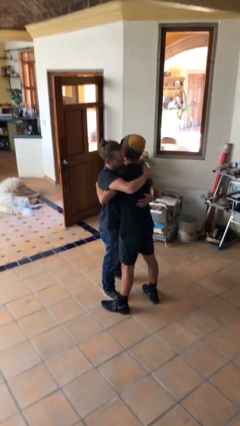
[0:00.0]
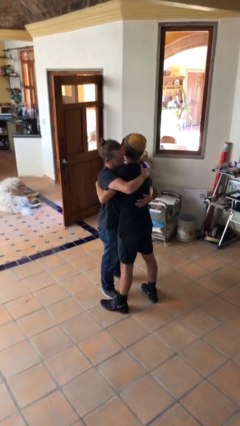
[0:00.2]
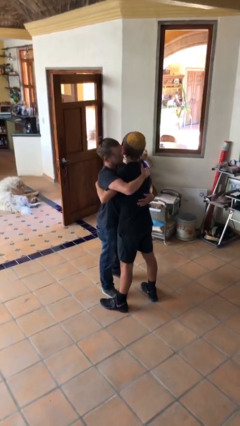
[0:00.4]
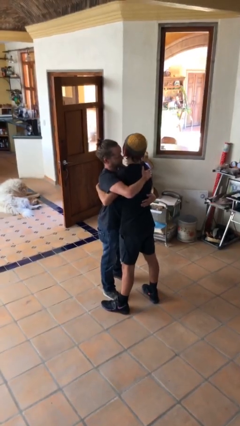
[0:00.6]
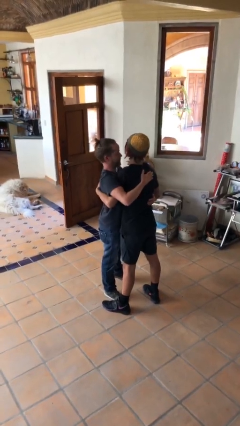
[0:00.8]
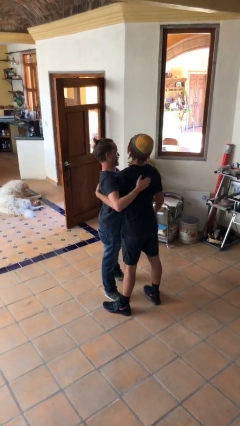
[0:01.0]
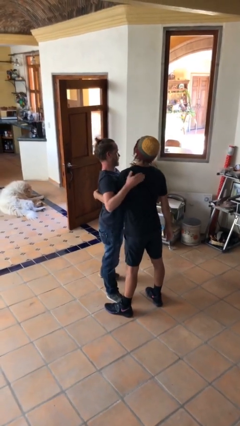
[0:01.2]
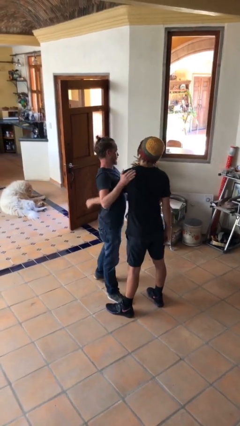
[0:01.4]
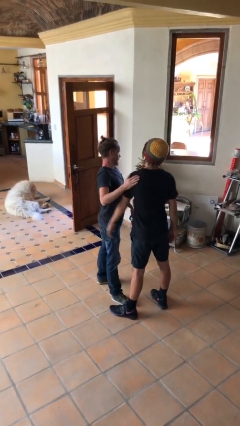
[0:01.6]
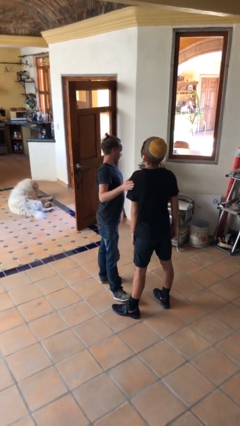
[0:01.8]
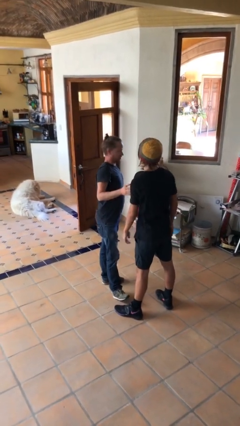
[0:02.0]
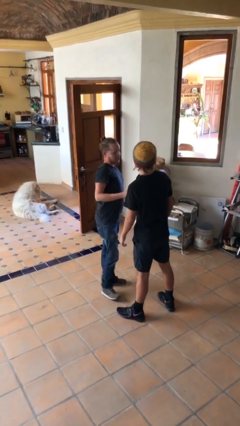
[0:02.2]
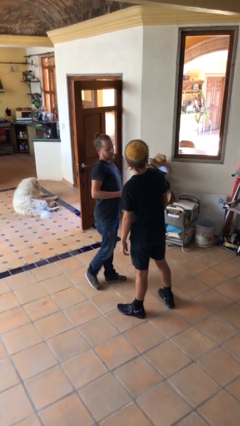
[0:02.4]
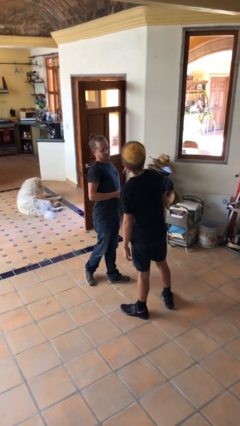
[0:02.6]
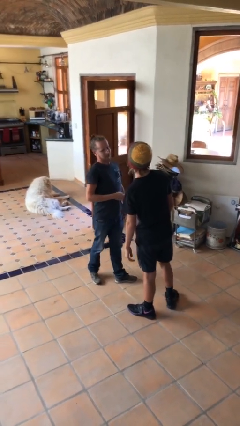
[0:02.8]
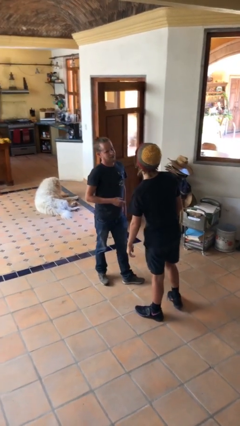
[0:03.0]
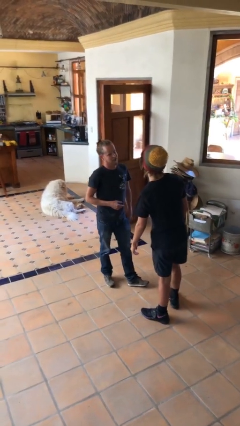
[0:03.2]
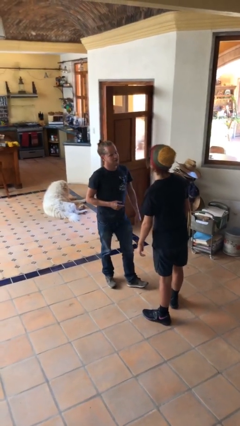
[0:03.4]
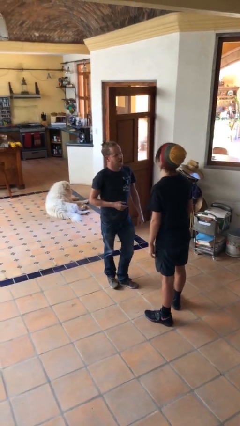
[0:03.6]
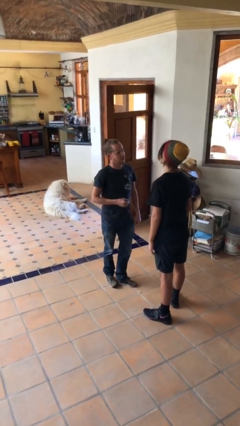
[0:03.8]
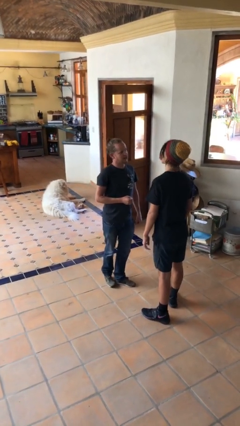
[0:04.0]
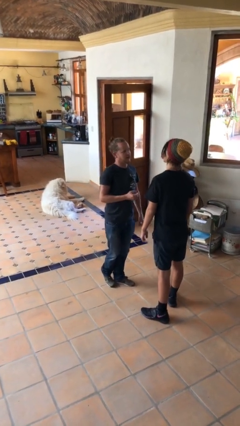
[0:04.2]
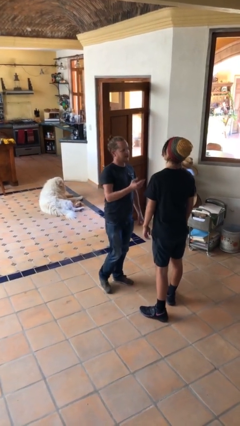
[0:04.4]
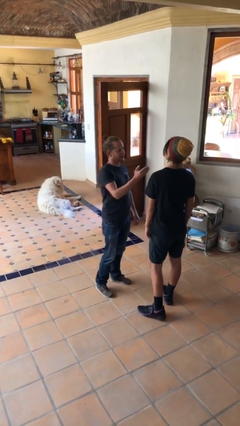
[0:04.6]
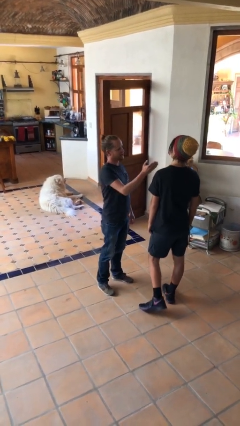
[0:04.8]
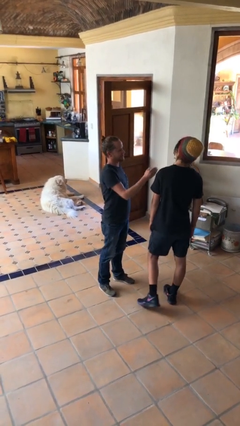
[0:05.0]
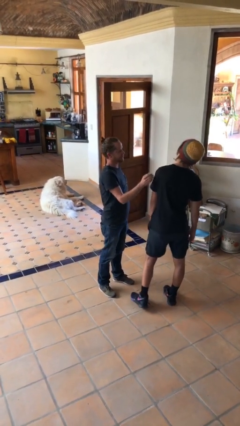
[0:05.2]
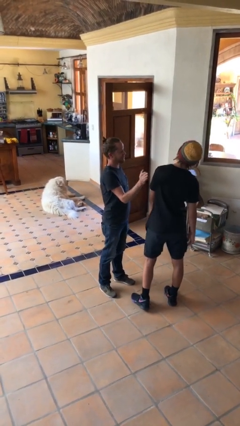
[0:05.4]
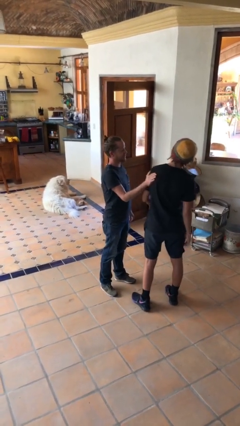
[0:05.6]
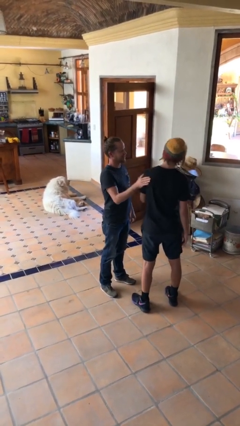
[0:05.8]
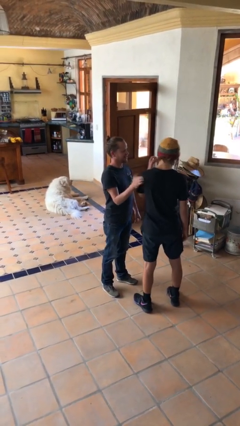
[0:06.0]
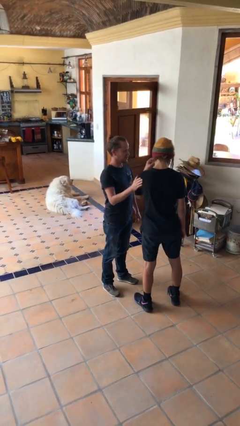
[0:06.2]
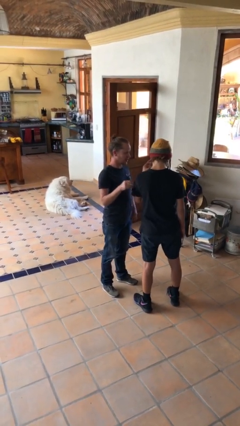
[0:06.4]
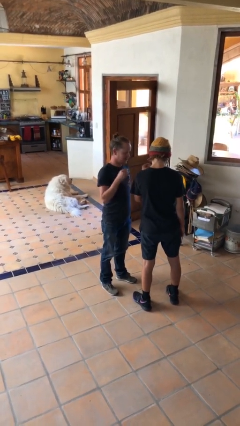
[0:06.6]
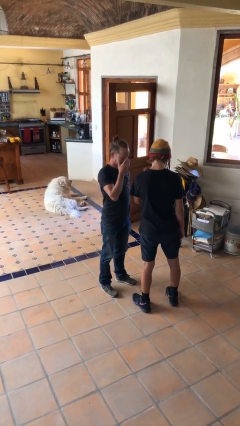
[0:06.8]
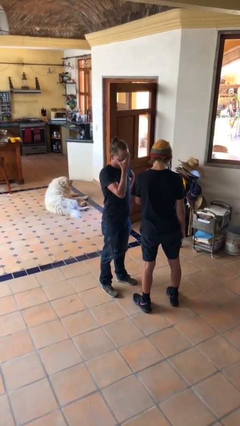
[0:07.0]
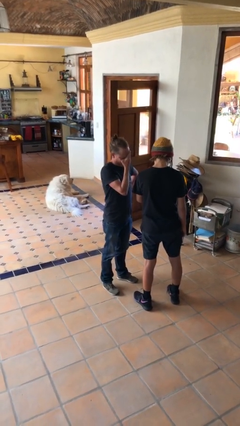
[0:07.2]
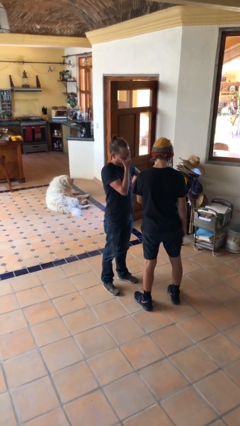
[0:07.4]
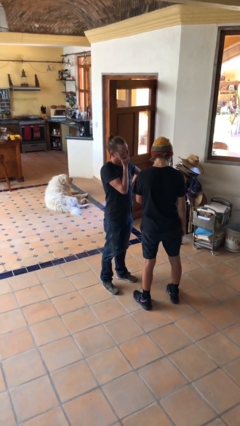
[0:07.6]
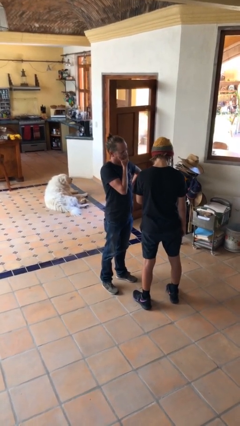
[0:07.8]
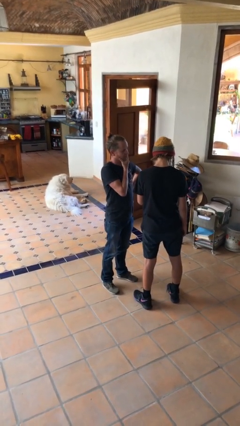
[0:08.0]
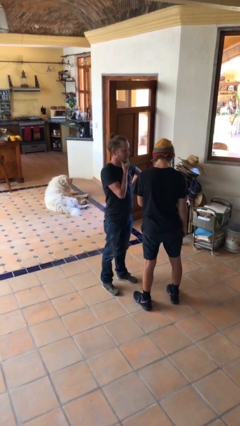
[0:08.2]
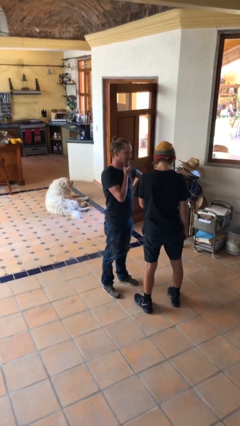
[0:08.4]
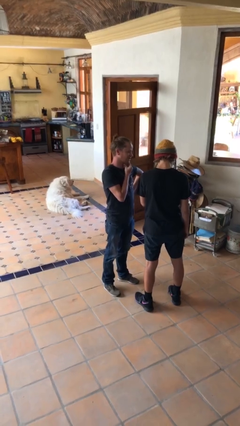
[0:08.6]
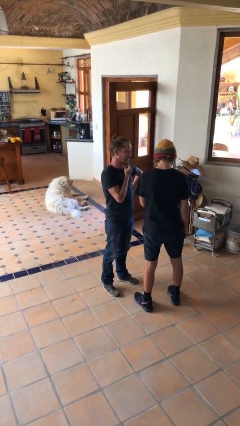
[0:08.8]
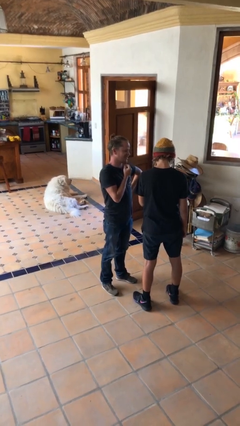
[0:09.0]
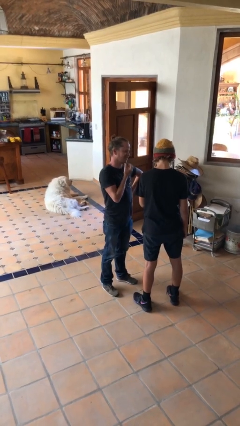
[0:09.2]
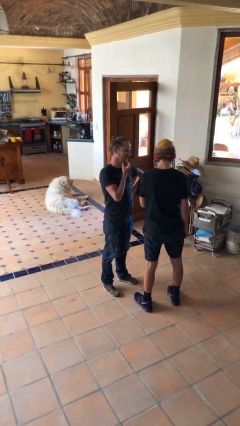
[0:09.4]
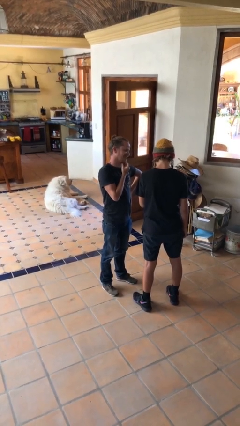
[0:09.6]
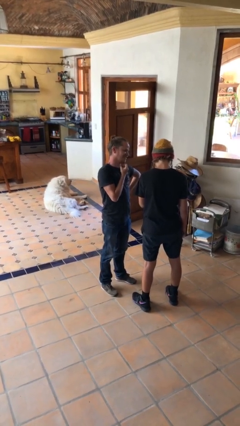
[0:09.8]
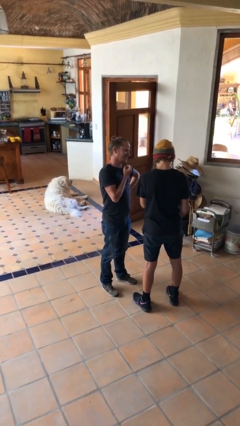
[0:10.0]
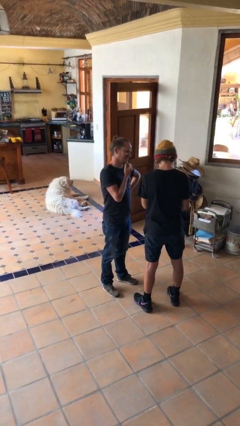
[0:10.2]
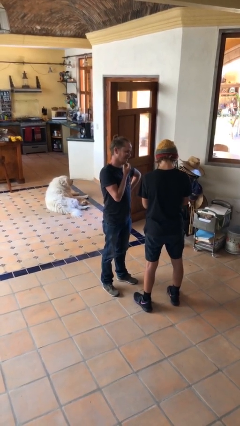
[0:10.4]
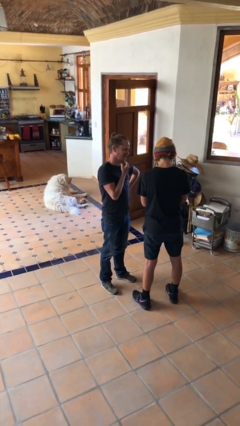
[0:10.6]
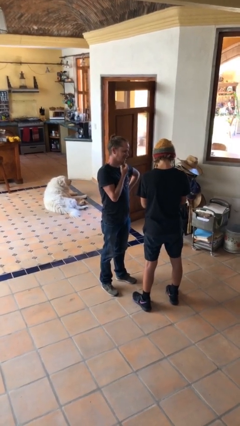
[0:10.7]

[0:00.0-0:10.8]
person talks to person

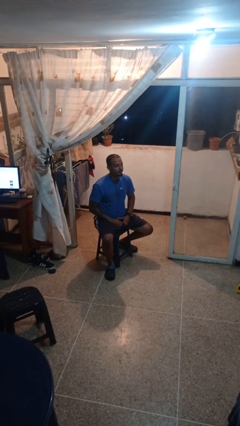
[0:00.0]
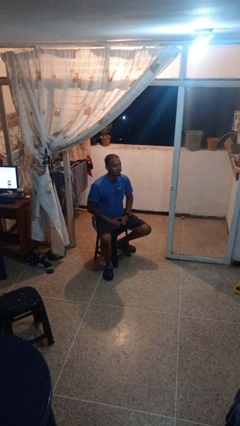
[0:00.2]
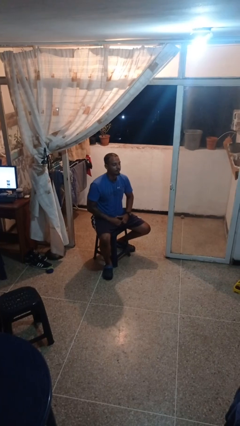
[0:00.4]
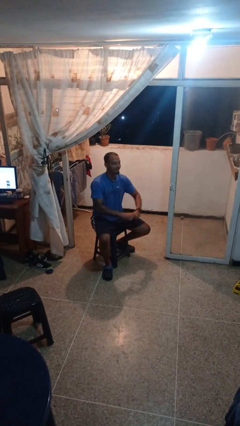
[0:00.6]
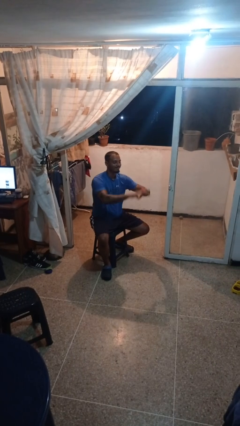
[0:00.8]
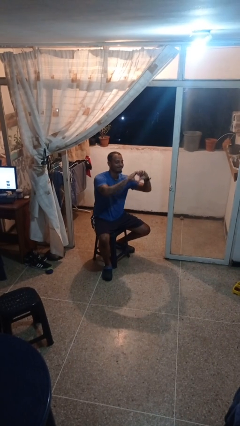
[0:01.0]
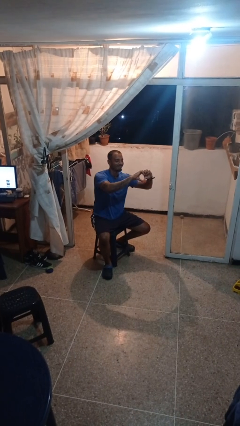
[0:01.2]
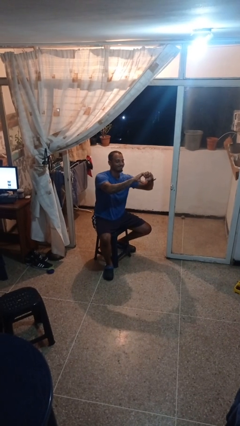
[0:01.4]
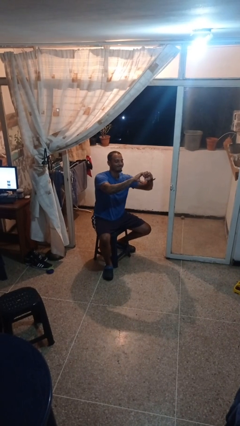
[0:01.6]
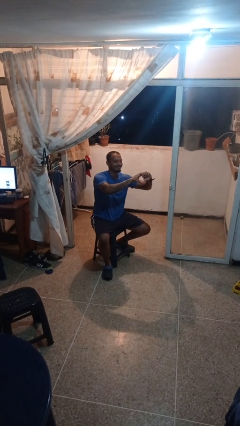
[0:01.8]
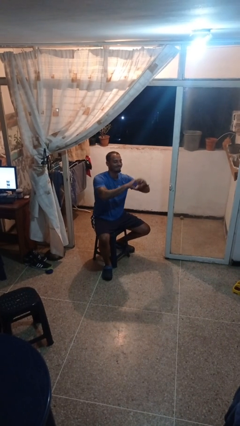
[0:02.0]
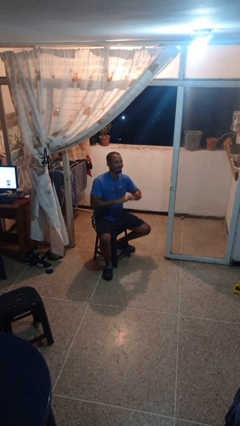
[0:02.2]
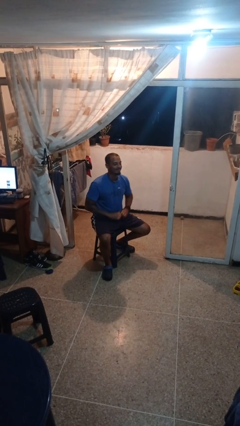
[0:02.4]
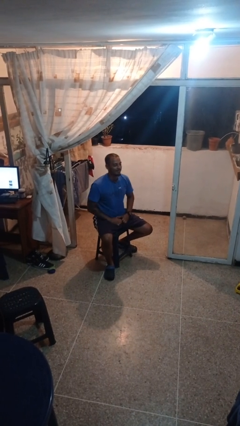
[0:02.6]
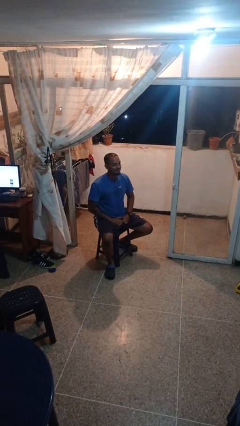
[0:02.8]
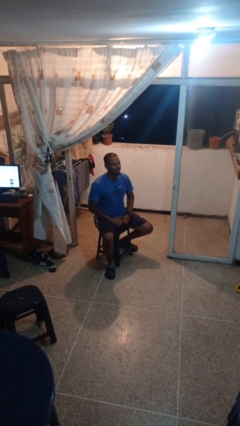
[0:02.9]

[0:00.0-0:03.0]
person gestures heart

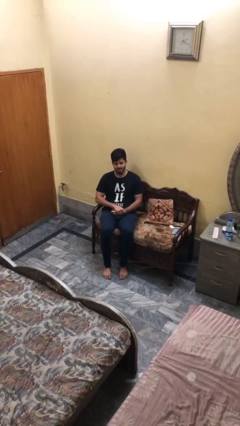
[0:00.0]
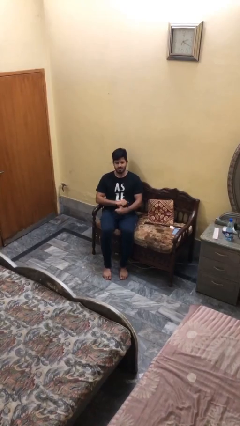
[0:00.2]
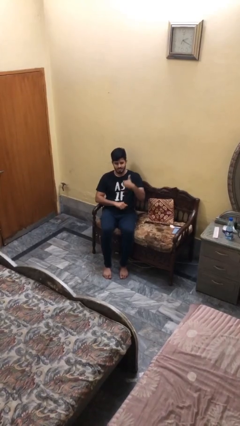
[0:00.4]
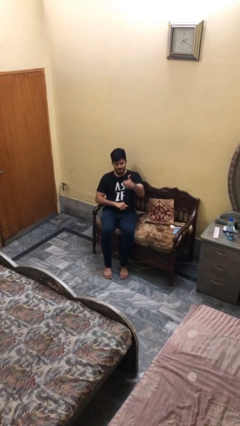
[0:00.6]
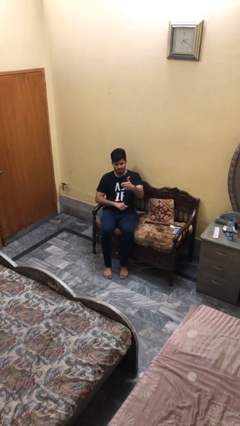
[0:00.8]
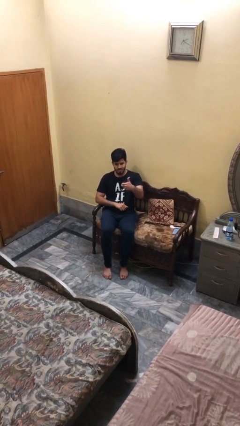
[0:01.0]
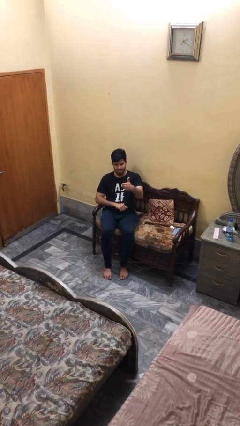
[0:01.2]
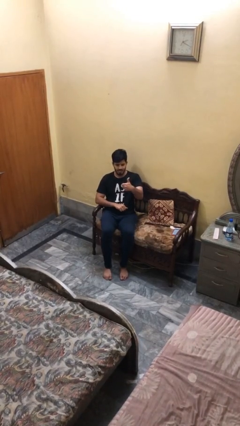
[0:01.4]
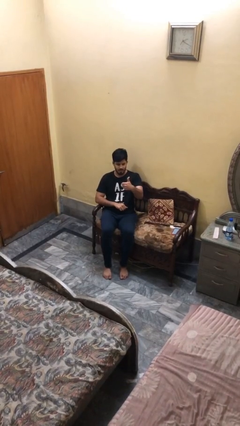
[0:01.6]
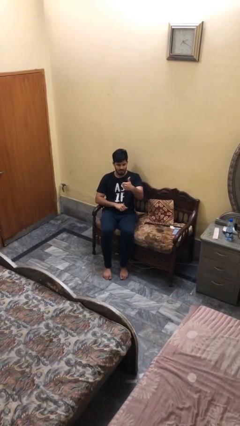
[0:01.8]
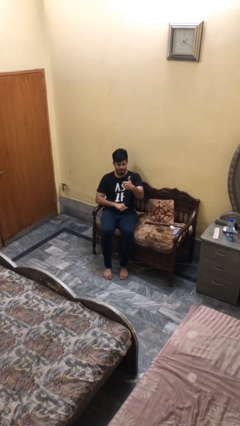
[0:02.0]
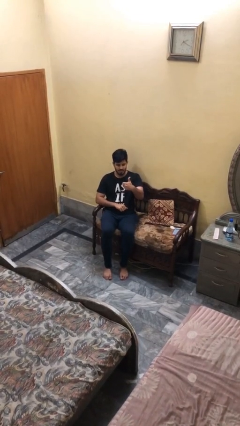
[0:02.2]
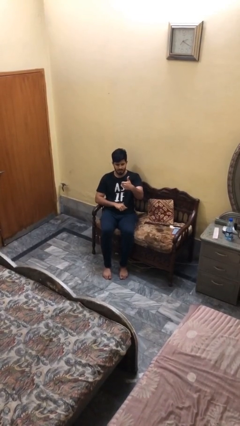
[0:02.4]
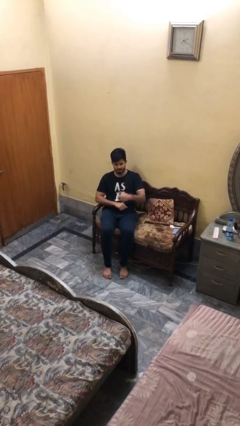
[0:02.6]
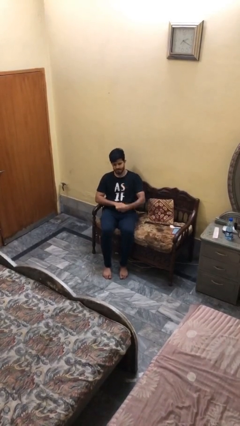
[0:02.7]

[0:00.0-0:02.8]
person gestures thumbs up

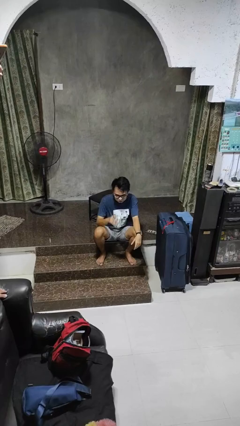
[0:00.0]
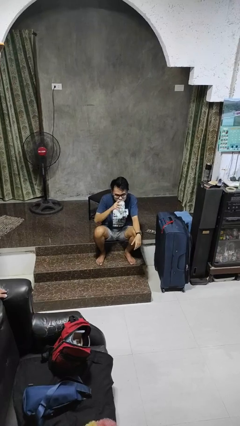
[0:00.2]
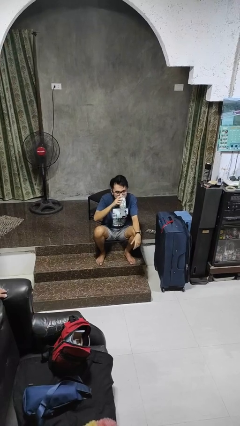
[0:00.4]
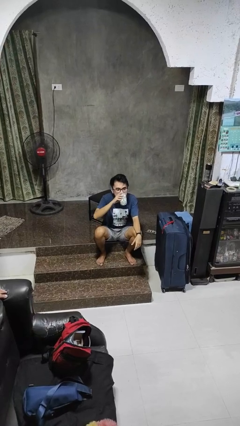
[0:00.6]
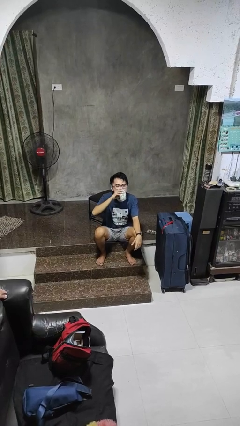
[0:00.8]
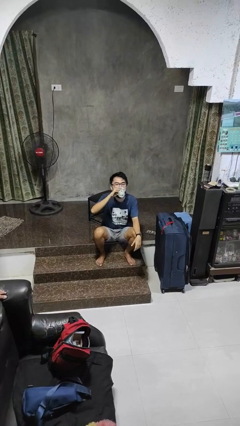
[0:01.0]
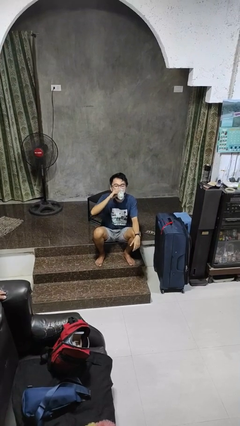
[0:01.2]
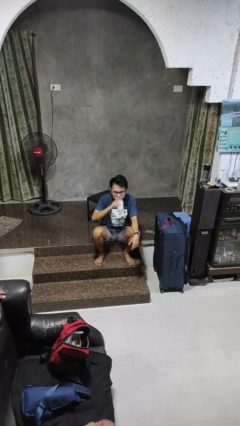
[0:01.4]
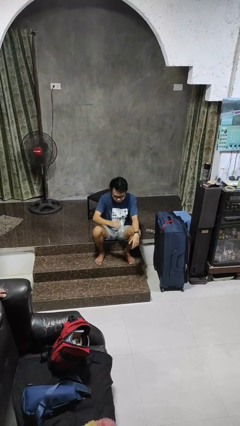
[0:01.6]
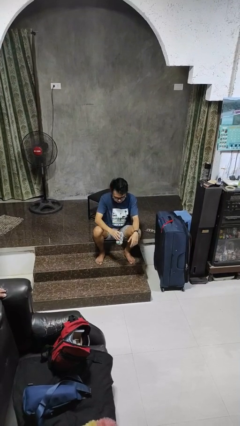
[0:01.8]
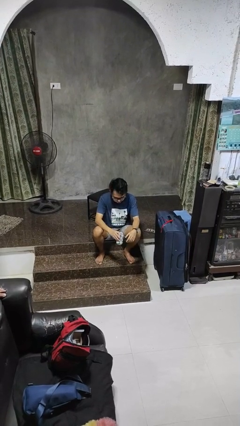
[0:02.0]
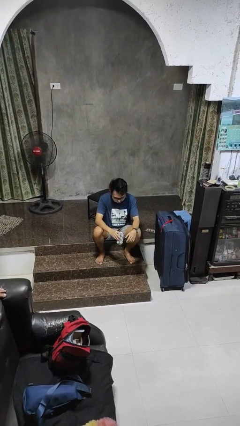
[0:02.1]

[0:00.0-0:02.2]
person drinks from beverage can
